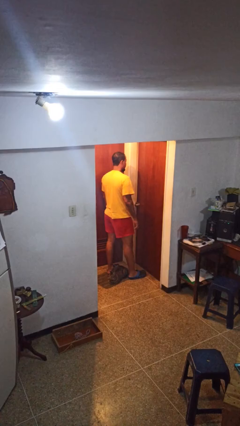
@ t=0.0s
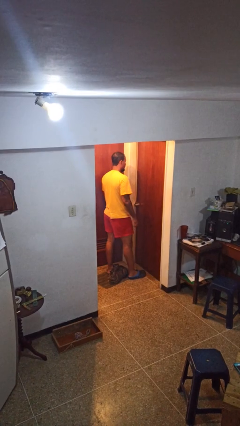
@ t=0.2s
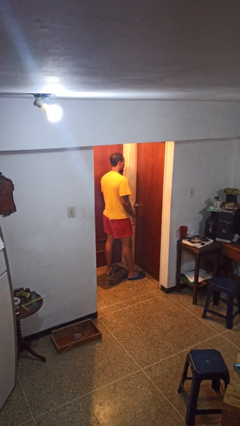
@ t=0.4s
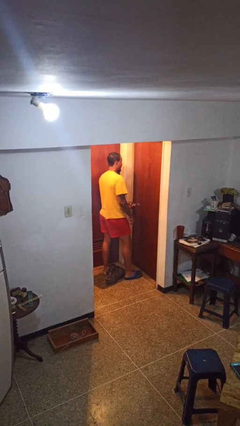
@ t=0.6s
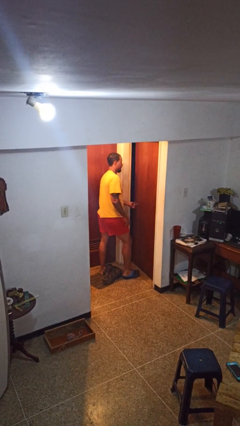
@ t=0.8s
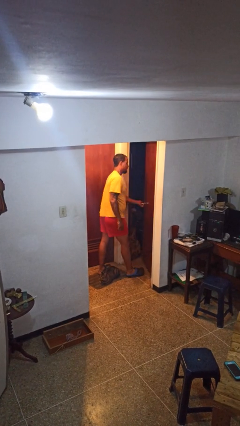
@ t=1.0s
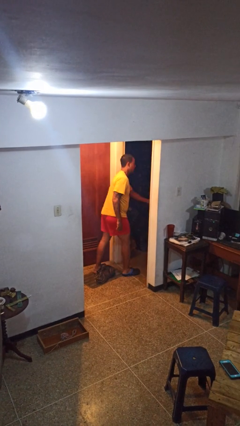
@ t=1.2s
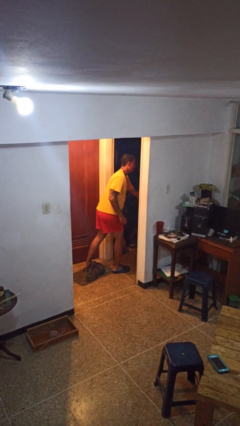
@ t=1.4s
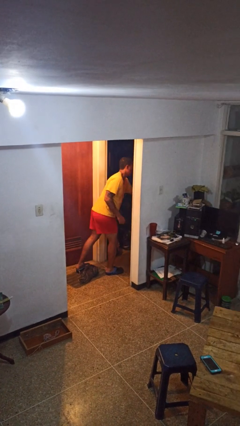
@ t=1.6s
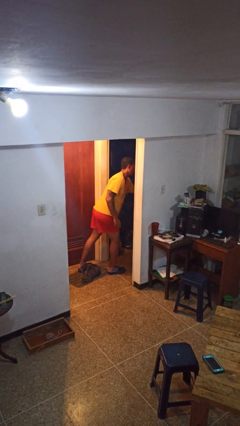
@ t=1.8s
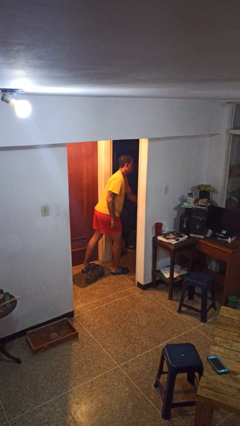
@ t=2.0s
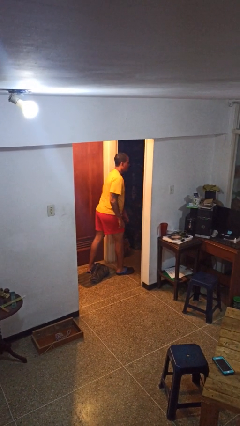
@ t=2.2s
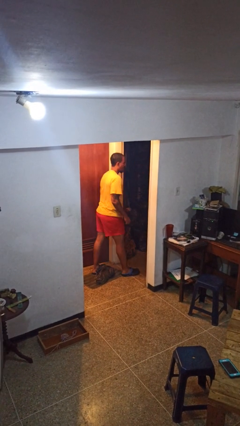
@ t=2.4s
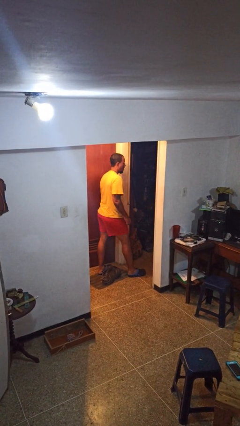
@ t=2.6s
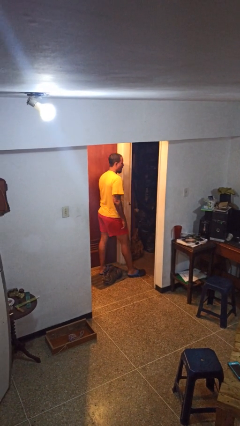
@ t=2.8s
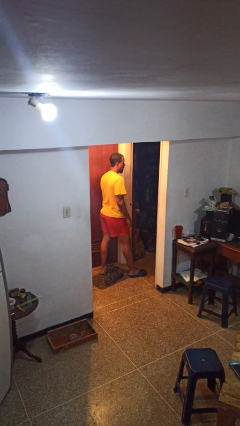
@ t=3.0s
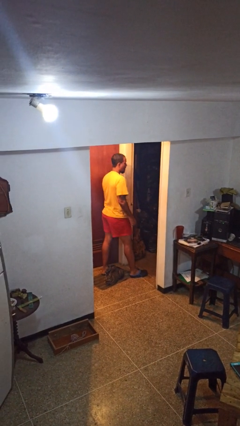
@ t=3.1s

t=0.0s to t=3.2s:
person opens facility door

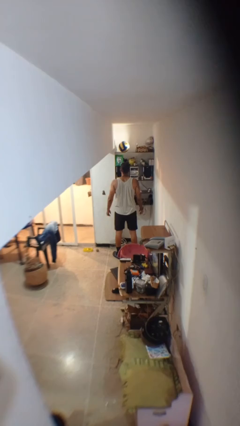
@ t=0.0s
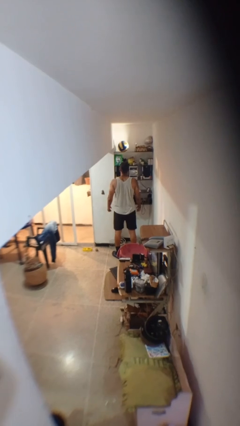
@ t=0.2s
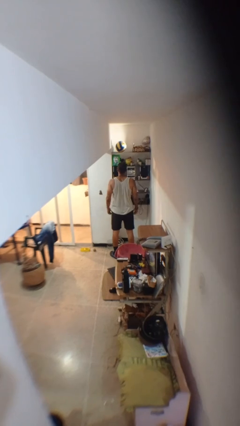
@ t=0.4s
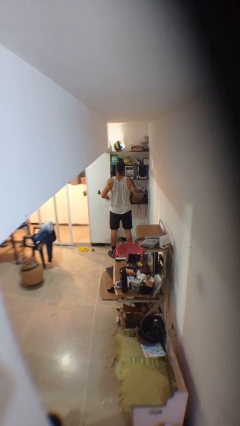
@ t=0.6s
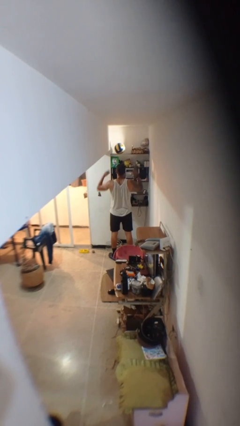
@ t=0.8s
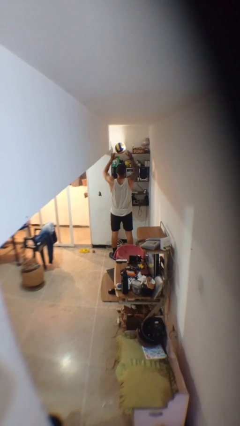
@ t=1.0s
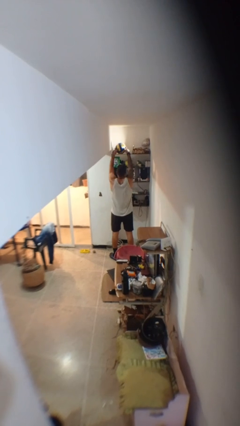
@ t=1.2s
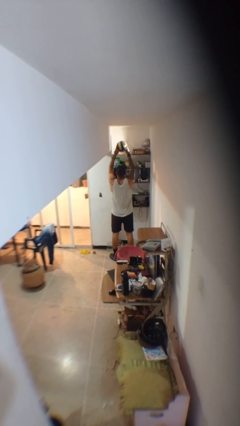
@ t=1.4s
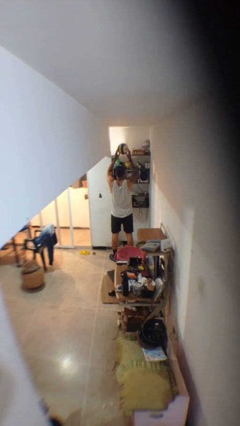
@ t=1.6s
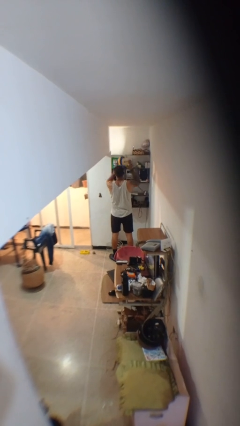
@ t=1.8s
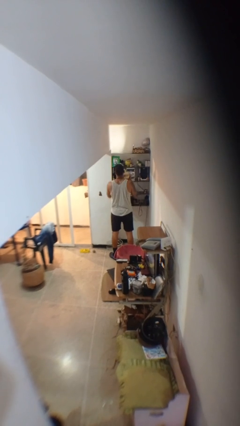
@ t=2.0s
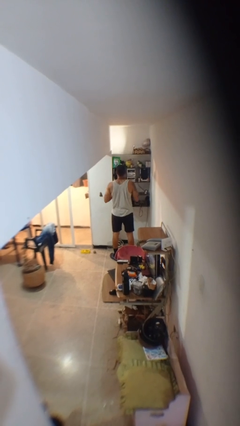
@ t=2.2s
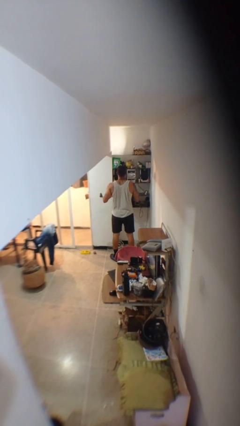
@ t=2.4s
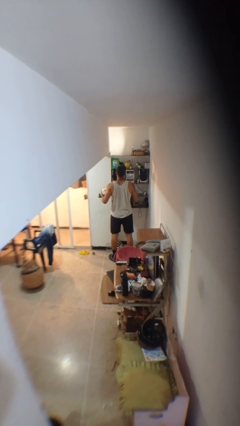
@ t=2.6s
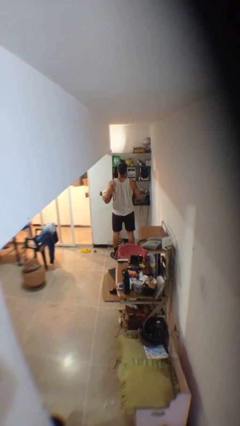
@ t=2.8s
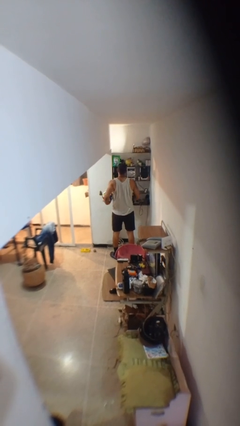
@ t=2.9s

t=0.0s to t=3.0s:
person picks up object from shelf

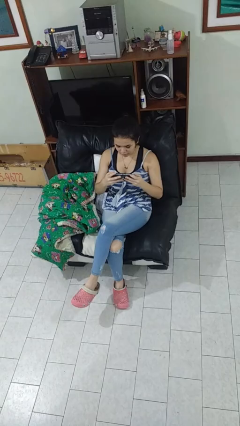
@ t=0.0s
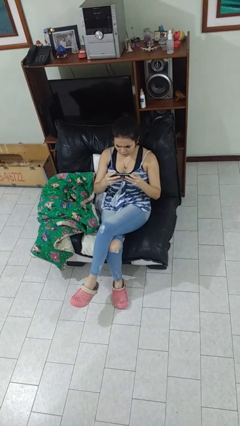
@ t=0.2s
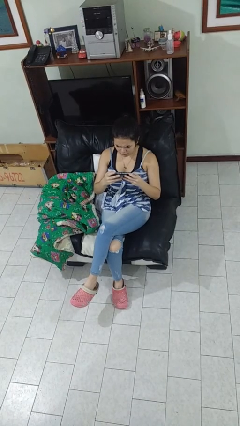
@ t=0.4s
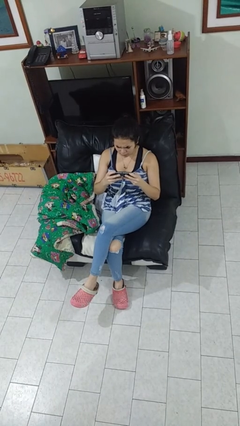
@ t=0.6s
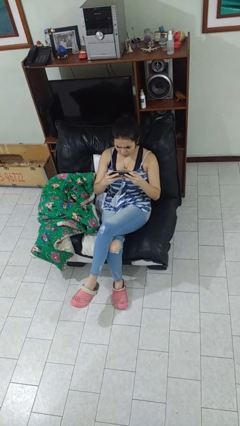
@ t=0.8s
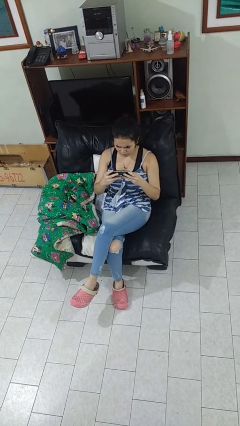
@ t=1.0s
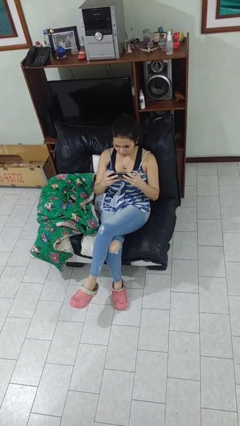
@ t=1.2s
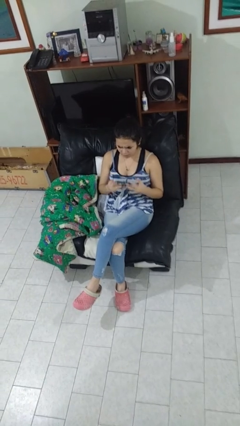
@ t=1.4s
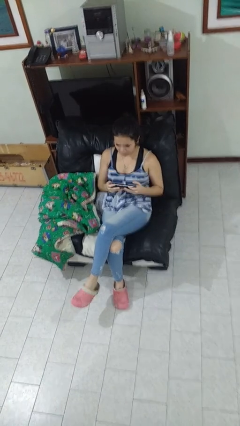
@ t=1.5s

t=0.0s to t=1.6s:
person interacts with handheld game

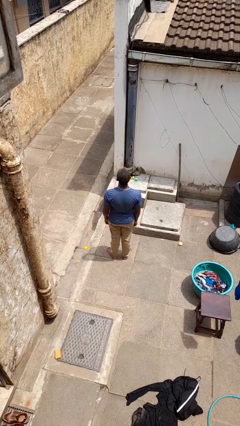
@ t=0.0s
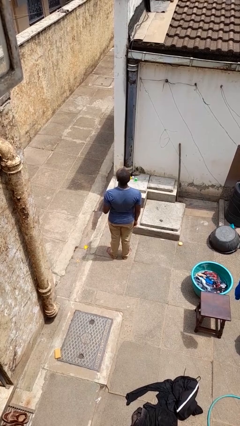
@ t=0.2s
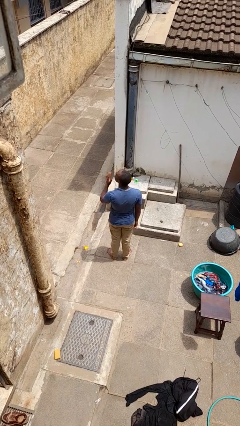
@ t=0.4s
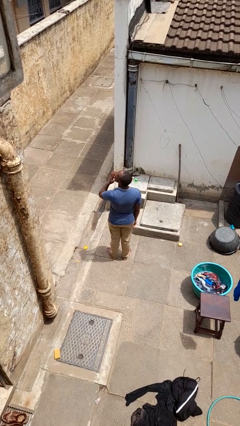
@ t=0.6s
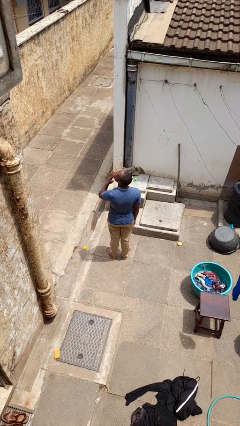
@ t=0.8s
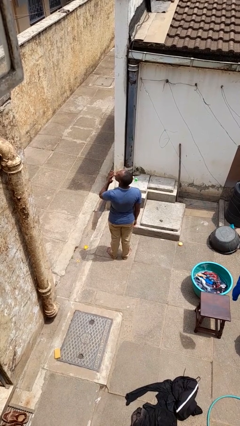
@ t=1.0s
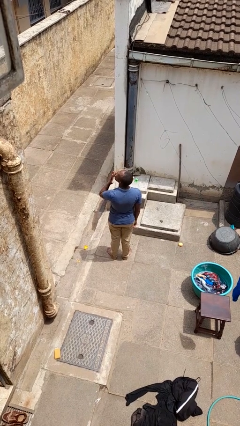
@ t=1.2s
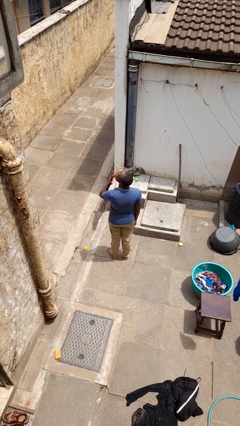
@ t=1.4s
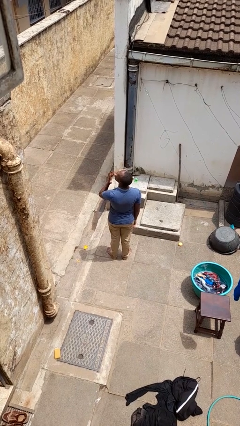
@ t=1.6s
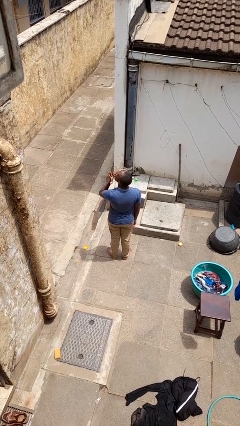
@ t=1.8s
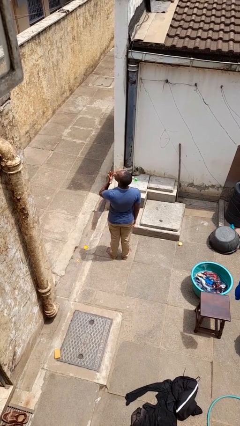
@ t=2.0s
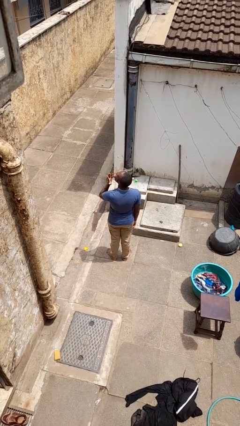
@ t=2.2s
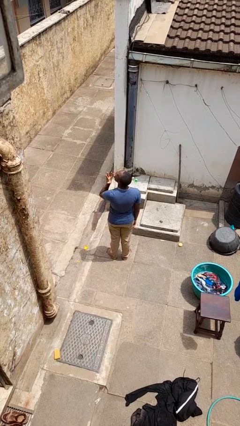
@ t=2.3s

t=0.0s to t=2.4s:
person licks fingers

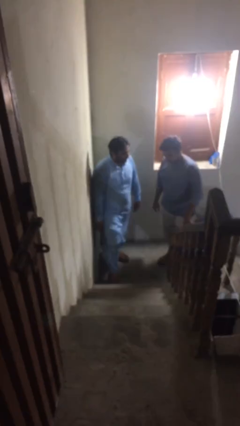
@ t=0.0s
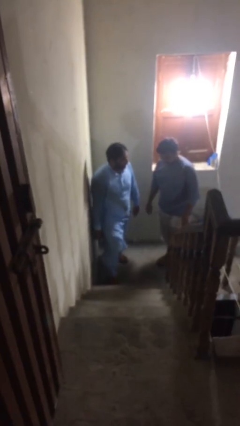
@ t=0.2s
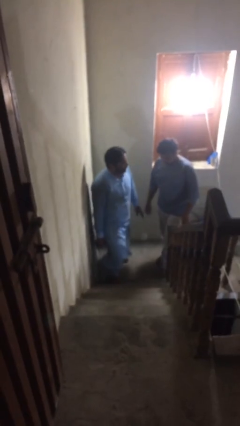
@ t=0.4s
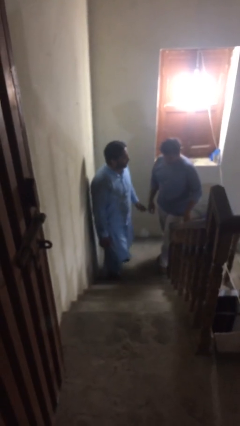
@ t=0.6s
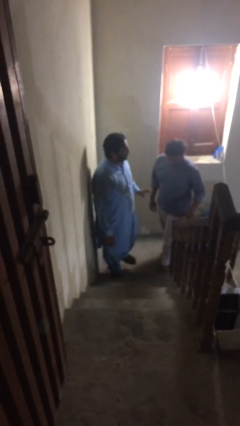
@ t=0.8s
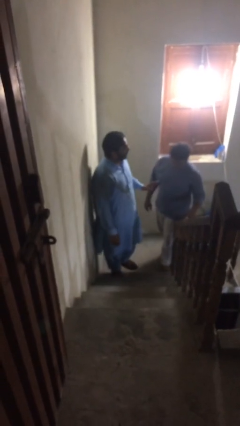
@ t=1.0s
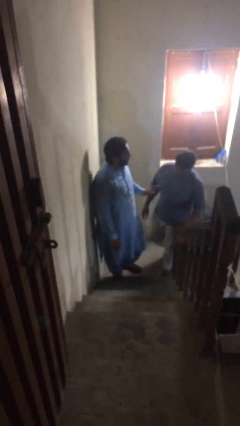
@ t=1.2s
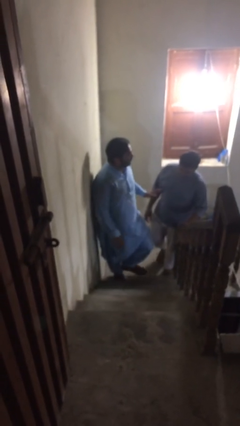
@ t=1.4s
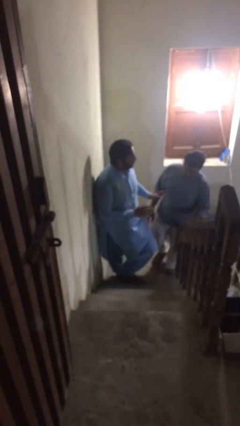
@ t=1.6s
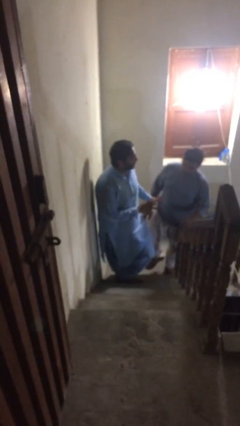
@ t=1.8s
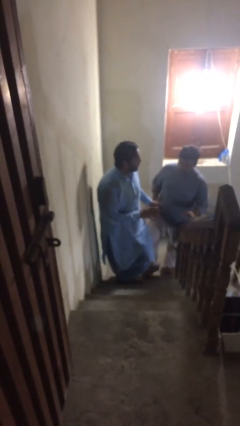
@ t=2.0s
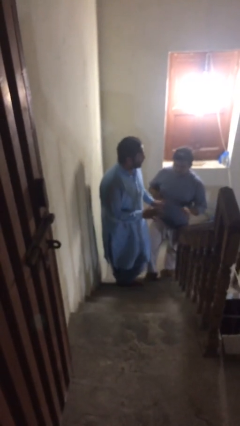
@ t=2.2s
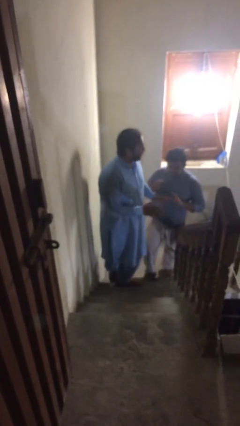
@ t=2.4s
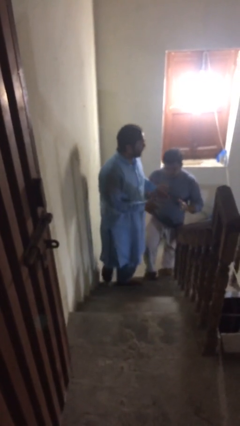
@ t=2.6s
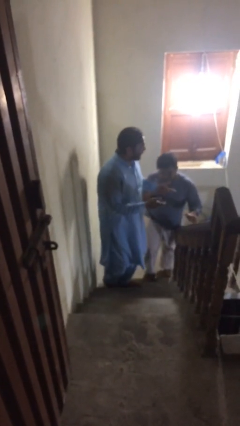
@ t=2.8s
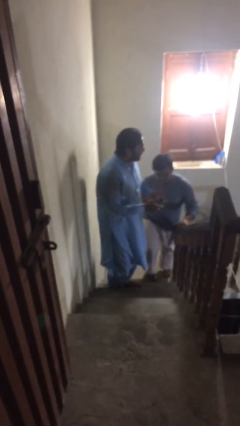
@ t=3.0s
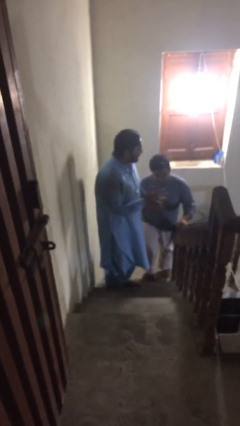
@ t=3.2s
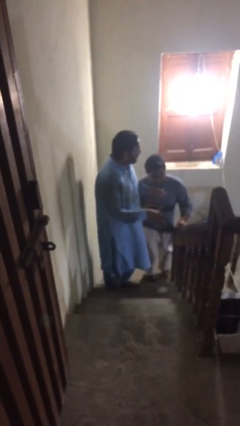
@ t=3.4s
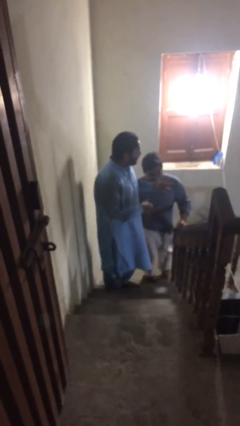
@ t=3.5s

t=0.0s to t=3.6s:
person talks to person

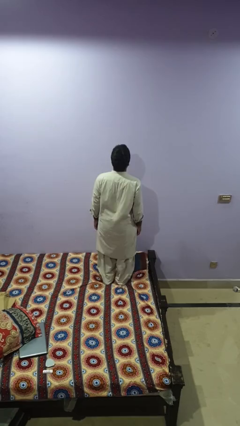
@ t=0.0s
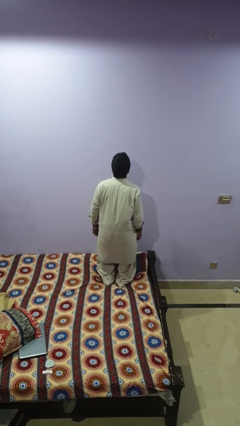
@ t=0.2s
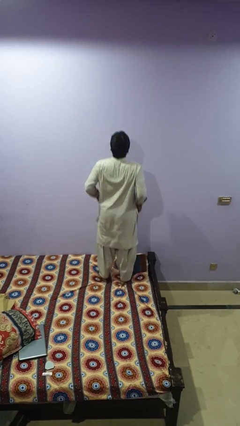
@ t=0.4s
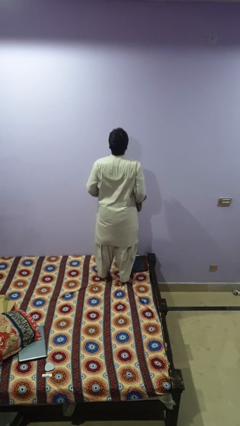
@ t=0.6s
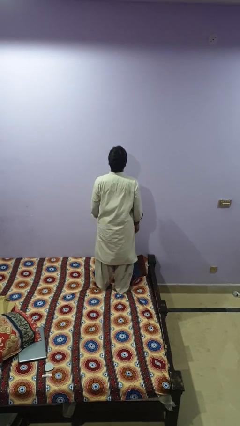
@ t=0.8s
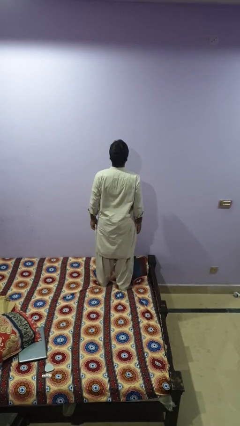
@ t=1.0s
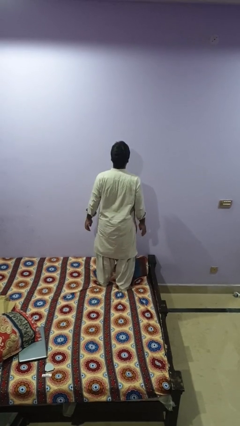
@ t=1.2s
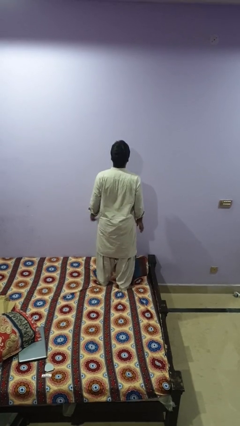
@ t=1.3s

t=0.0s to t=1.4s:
person jumps on bed

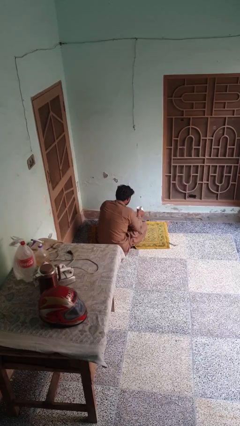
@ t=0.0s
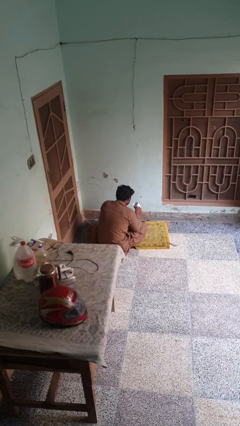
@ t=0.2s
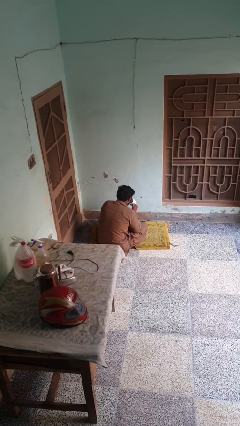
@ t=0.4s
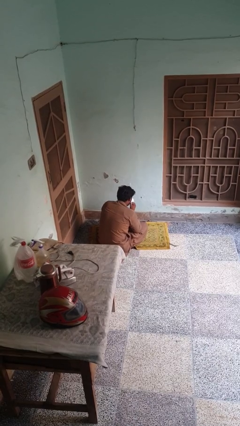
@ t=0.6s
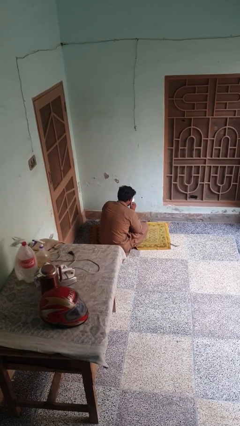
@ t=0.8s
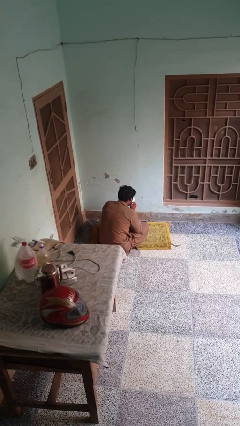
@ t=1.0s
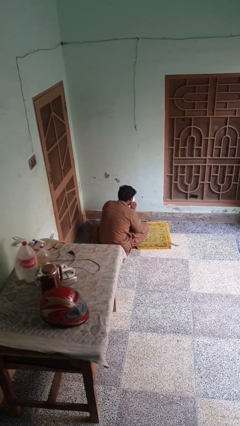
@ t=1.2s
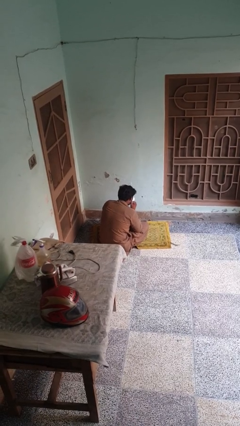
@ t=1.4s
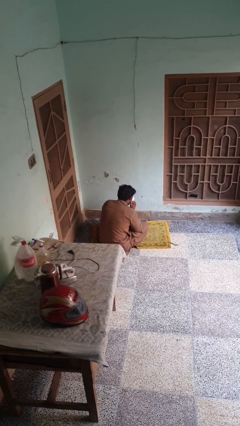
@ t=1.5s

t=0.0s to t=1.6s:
person drinks from mug
